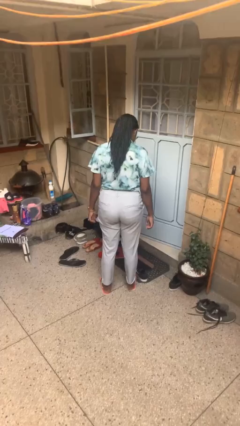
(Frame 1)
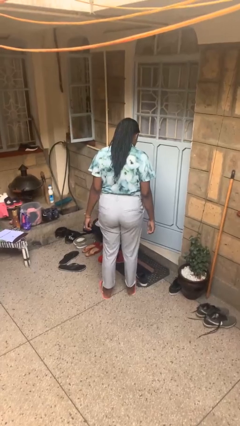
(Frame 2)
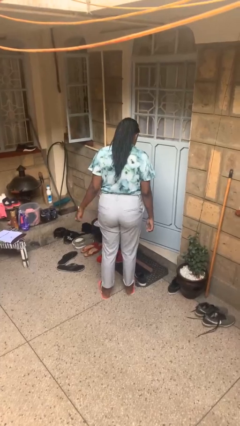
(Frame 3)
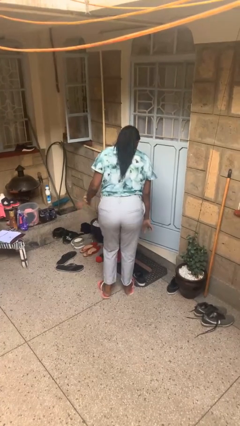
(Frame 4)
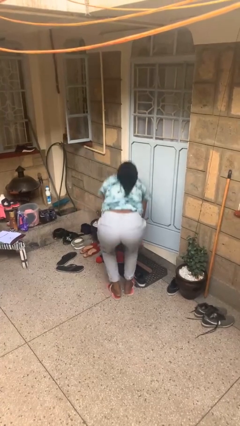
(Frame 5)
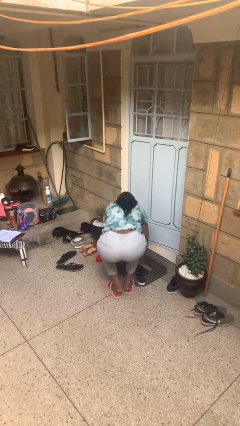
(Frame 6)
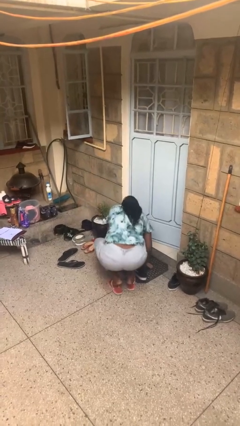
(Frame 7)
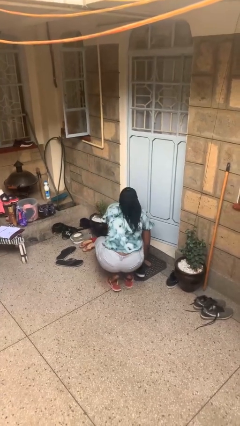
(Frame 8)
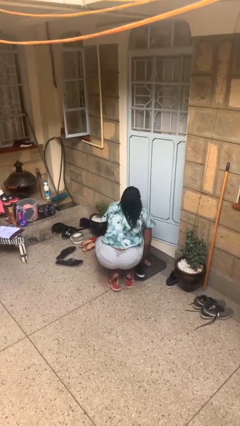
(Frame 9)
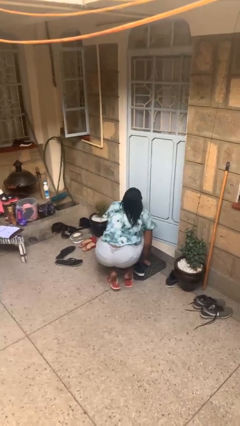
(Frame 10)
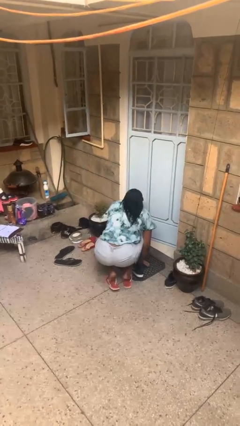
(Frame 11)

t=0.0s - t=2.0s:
person trips on object on floor

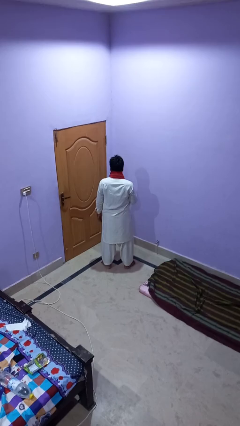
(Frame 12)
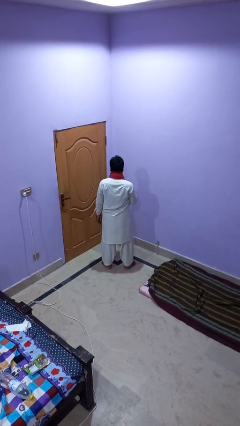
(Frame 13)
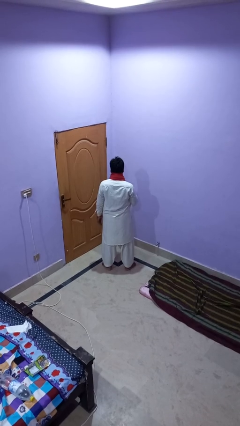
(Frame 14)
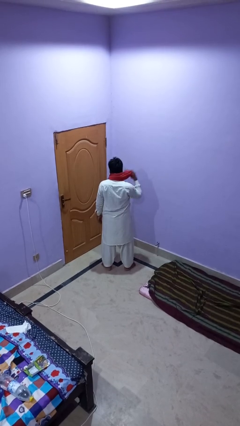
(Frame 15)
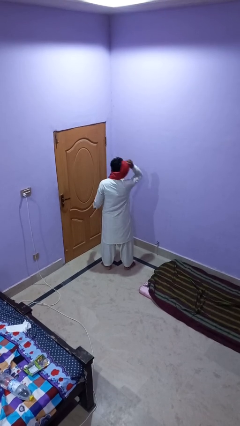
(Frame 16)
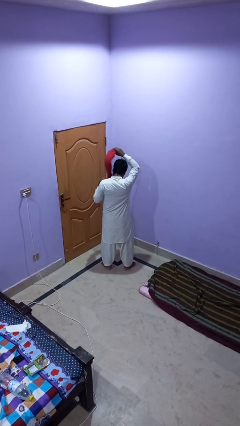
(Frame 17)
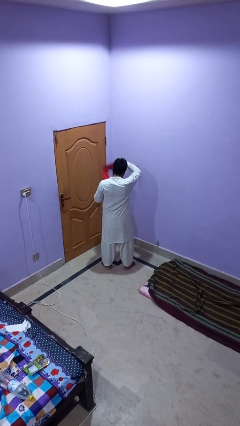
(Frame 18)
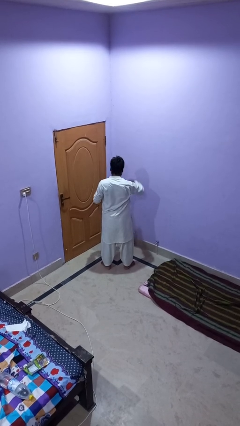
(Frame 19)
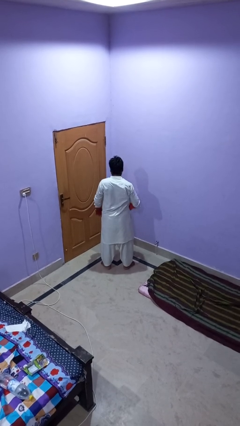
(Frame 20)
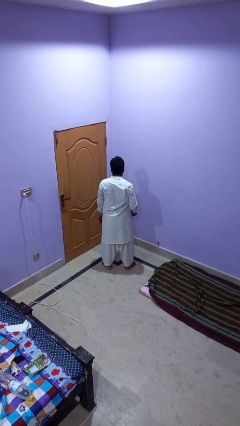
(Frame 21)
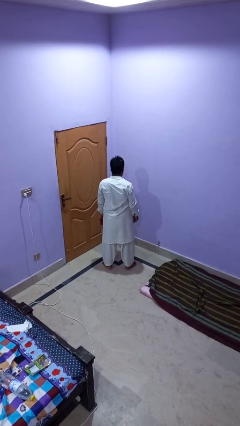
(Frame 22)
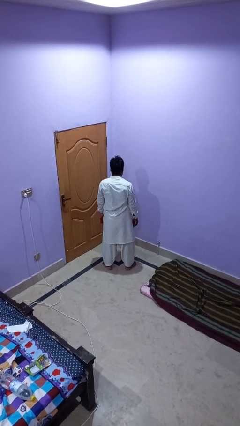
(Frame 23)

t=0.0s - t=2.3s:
person takes off scarf

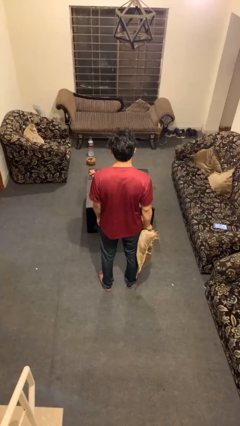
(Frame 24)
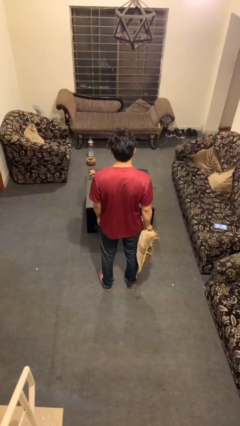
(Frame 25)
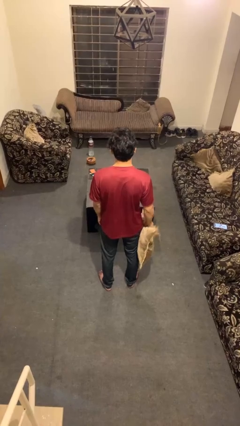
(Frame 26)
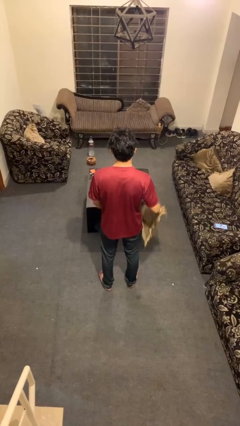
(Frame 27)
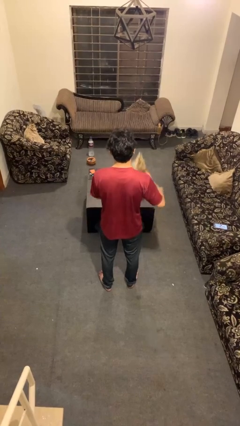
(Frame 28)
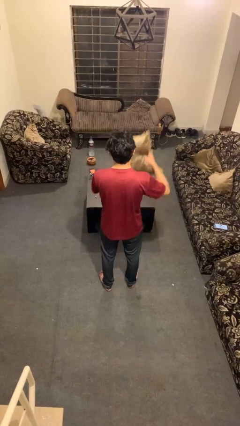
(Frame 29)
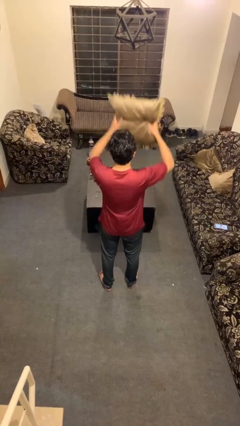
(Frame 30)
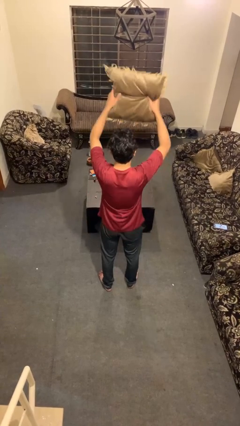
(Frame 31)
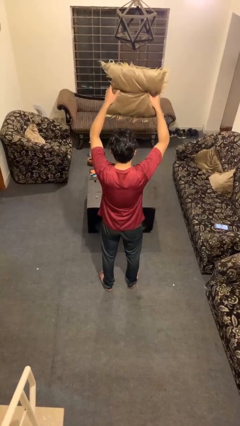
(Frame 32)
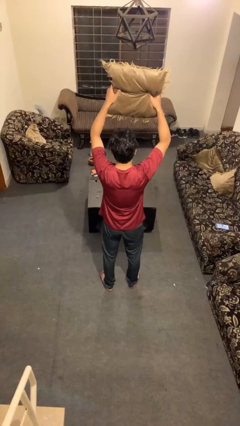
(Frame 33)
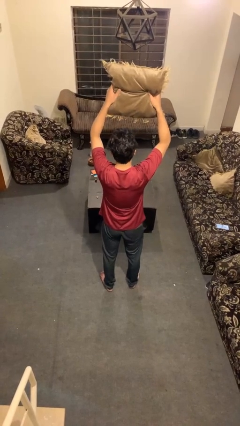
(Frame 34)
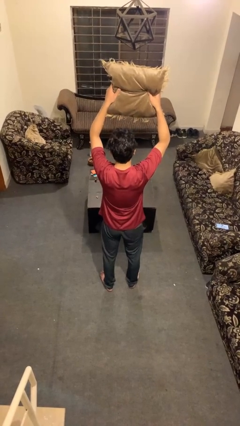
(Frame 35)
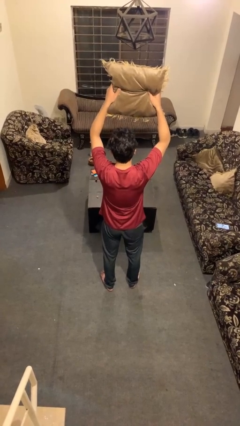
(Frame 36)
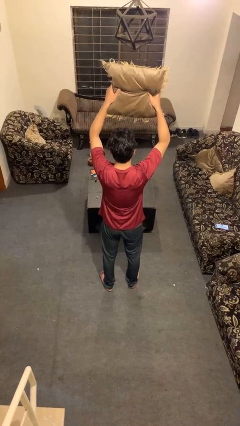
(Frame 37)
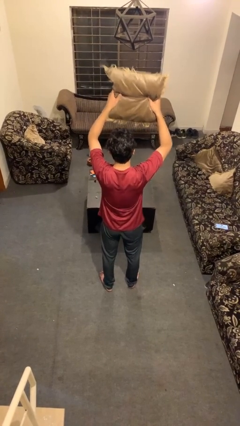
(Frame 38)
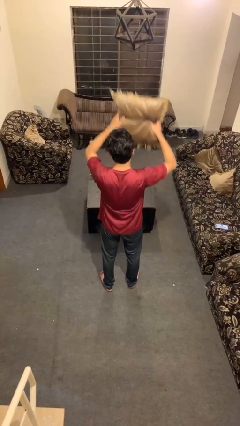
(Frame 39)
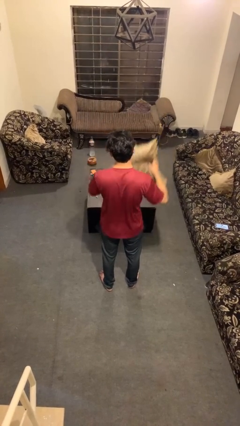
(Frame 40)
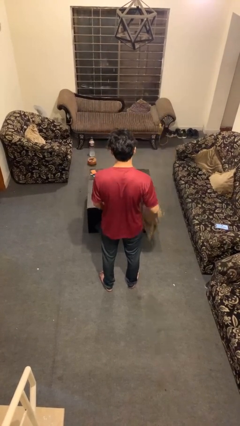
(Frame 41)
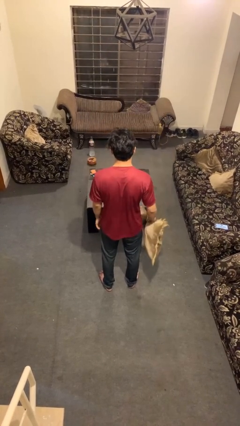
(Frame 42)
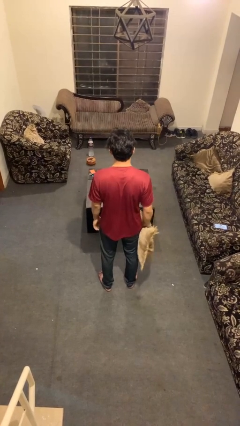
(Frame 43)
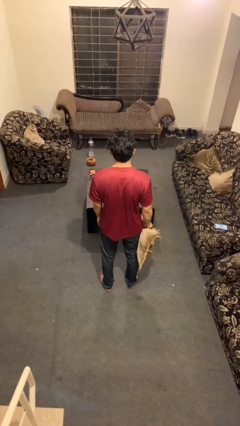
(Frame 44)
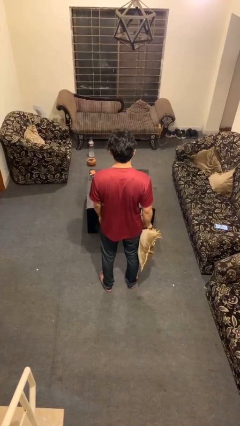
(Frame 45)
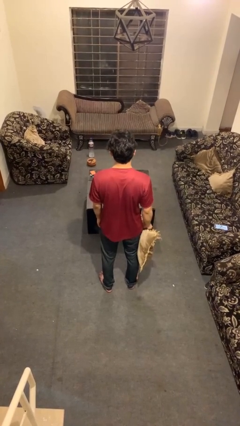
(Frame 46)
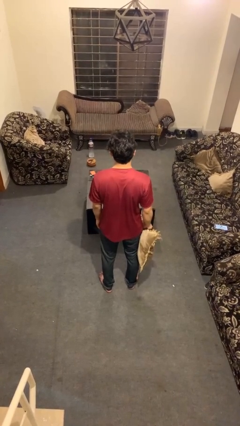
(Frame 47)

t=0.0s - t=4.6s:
person holds object above head

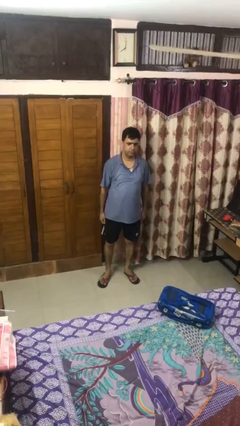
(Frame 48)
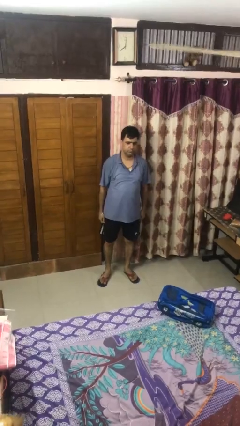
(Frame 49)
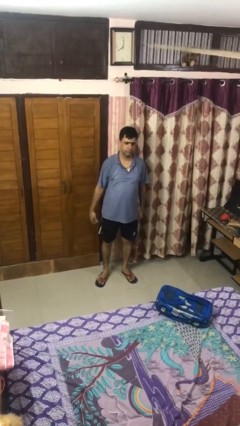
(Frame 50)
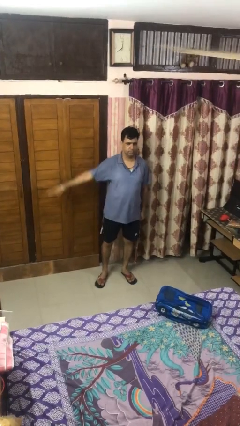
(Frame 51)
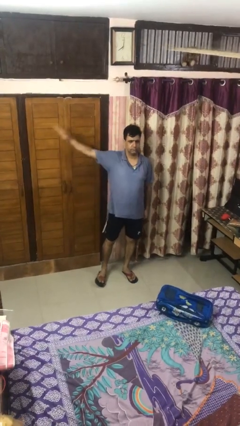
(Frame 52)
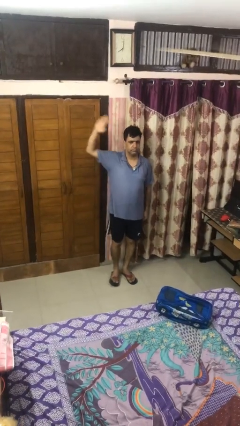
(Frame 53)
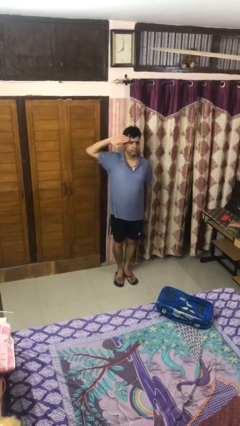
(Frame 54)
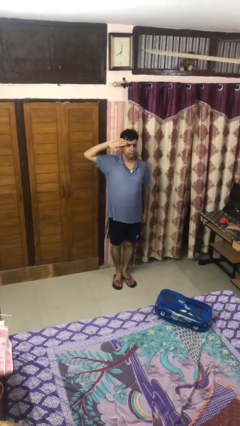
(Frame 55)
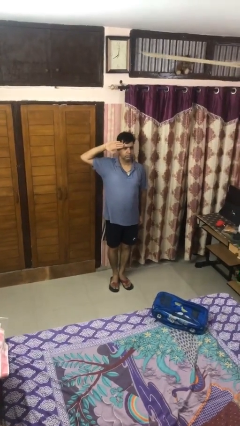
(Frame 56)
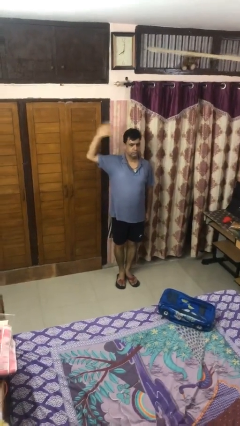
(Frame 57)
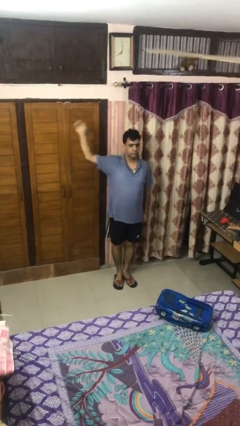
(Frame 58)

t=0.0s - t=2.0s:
person salutes

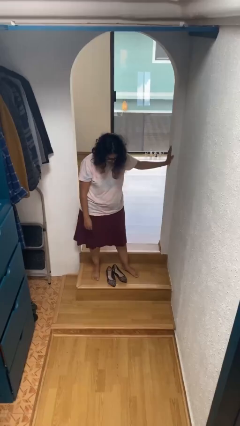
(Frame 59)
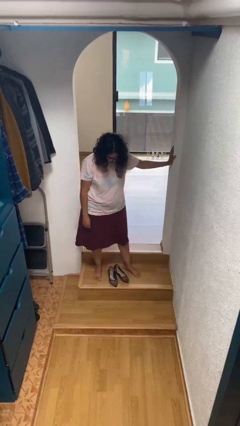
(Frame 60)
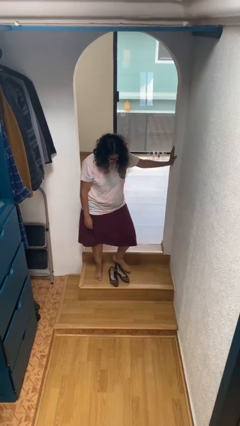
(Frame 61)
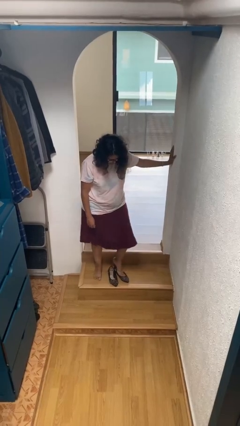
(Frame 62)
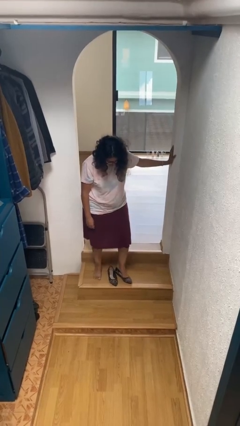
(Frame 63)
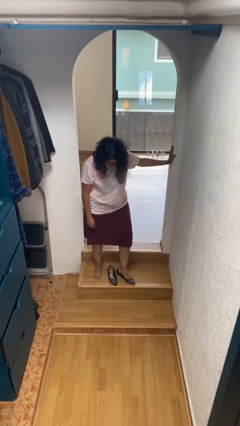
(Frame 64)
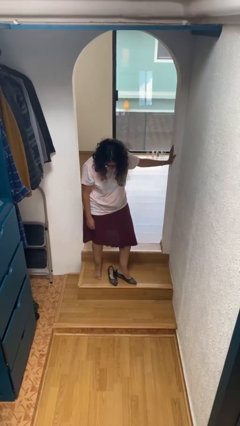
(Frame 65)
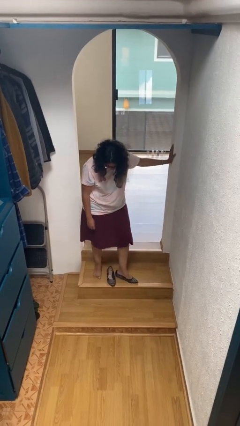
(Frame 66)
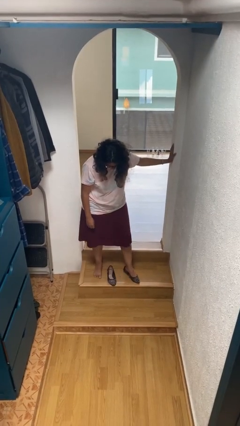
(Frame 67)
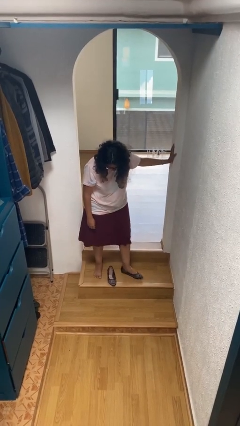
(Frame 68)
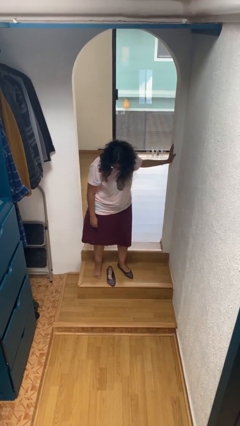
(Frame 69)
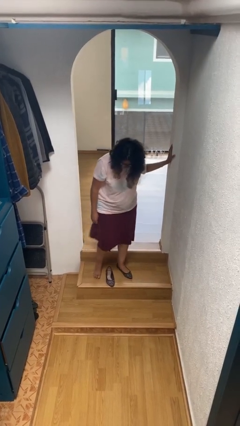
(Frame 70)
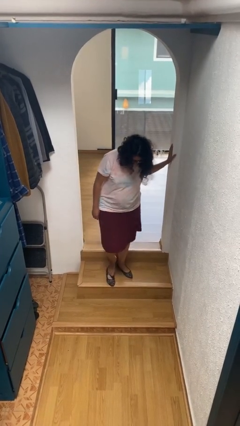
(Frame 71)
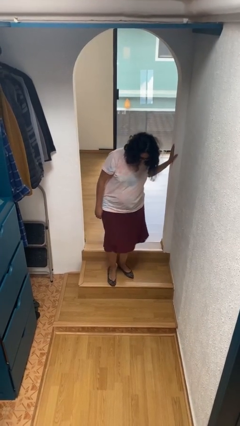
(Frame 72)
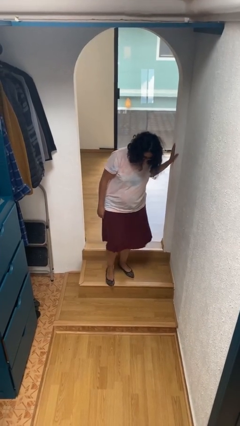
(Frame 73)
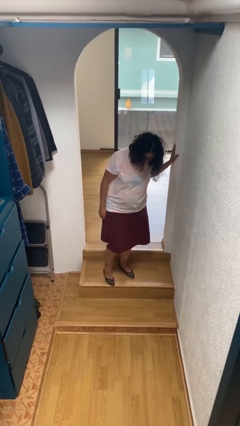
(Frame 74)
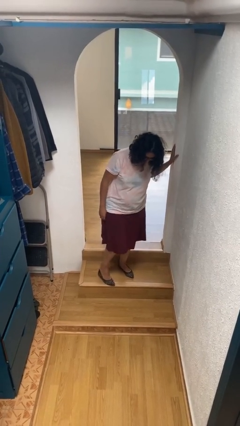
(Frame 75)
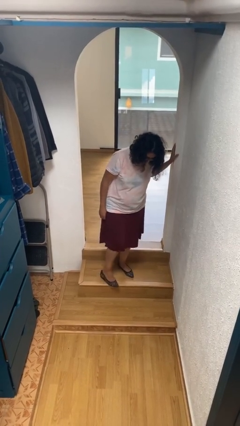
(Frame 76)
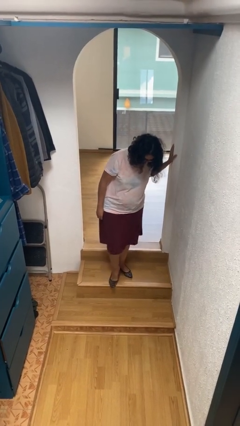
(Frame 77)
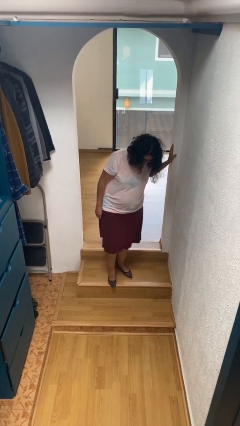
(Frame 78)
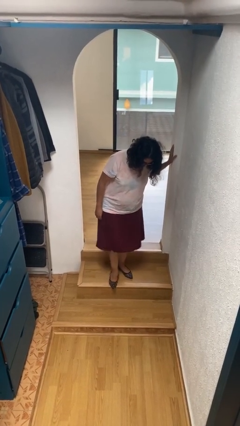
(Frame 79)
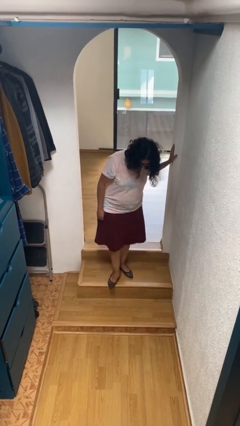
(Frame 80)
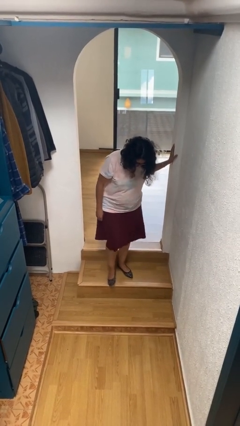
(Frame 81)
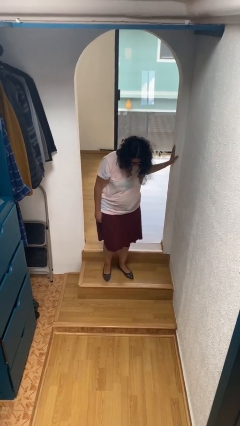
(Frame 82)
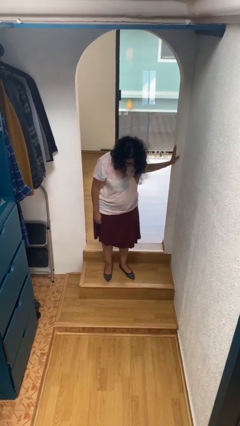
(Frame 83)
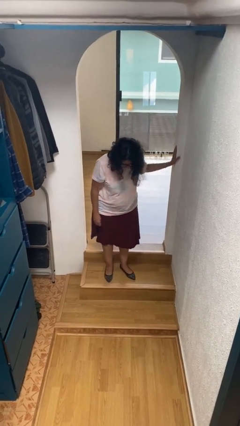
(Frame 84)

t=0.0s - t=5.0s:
person puts on shoes

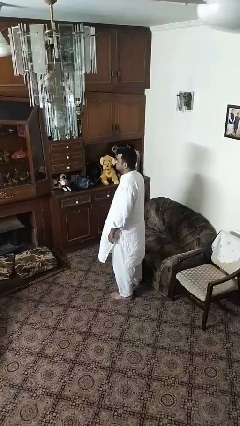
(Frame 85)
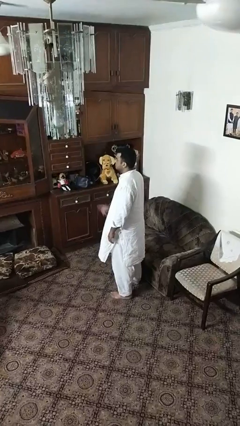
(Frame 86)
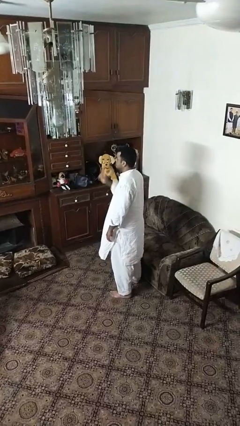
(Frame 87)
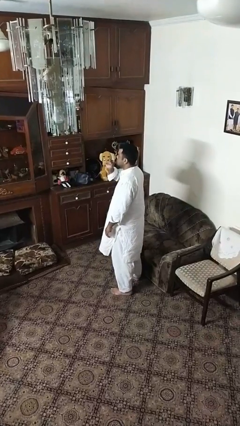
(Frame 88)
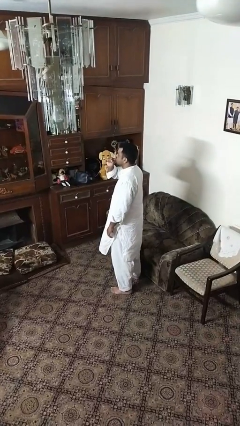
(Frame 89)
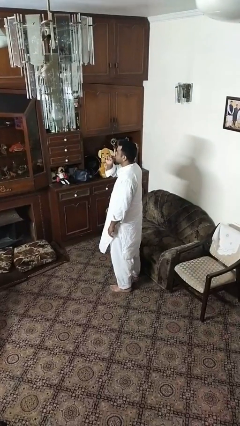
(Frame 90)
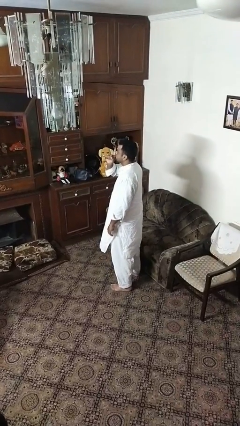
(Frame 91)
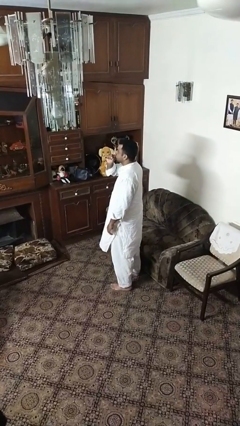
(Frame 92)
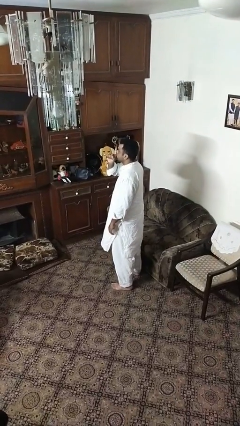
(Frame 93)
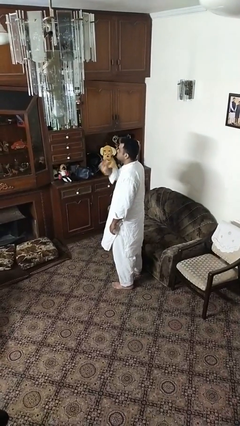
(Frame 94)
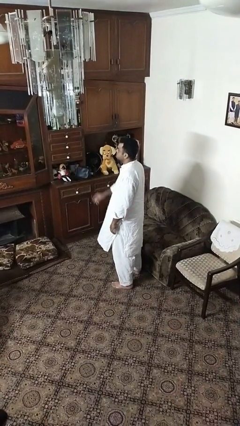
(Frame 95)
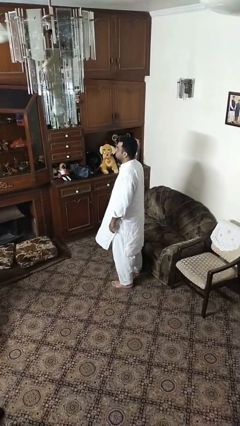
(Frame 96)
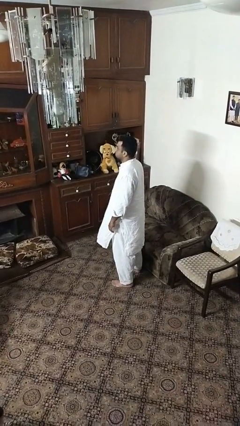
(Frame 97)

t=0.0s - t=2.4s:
person gestures be quiet
